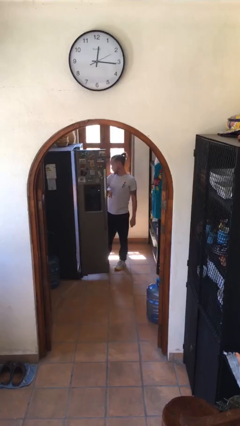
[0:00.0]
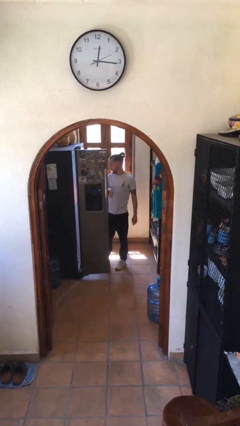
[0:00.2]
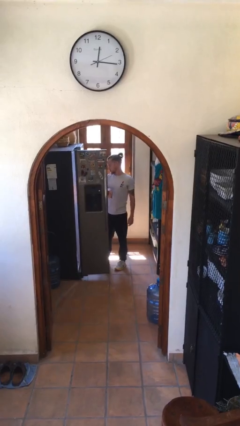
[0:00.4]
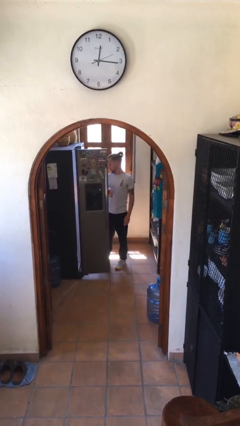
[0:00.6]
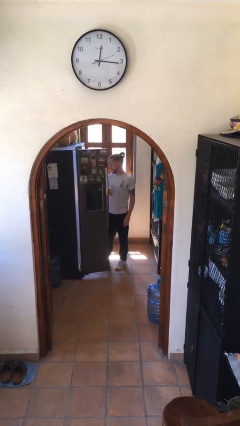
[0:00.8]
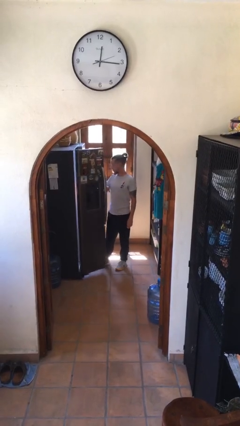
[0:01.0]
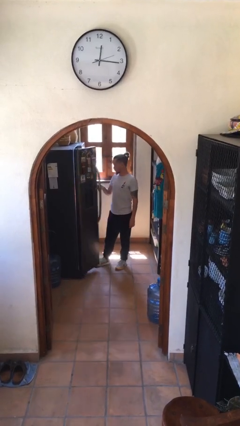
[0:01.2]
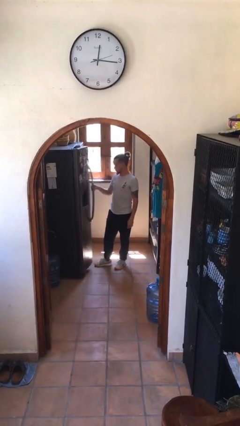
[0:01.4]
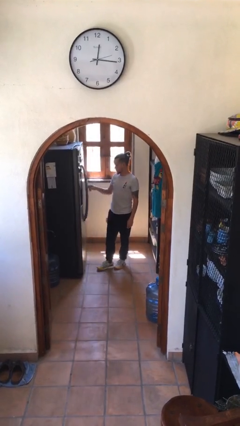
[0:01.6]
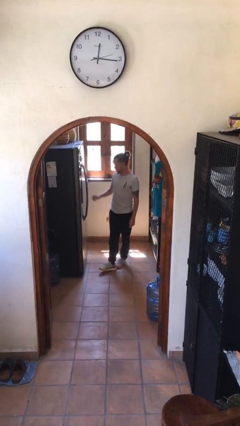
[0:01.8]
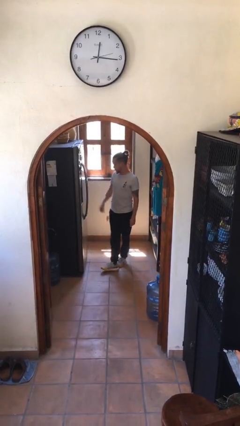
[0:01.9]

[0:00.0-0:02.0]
person closes refrigerator

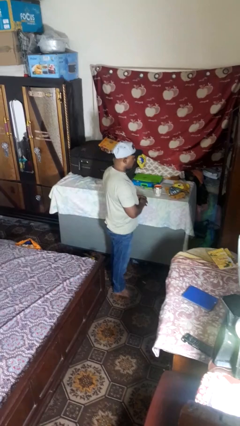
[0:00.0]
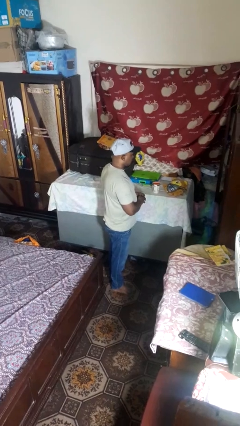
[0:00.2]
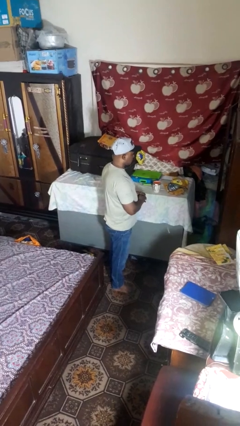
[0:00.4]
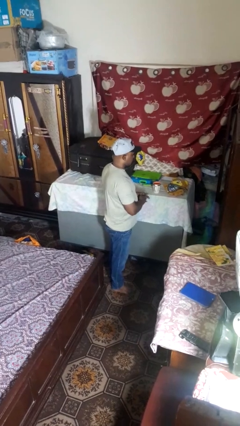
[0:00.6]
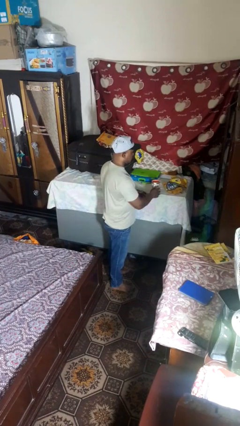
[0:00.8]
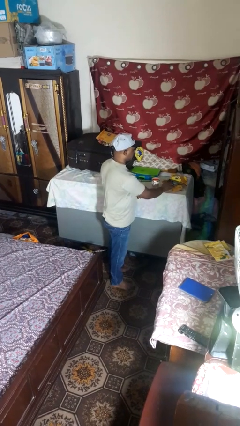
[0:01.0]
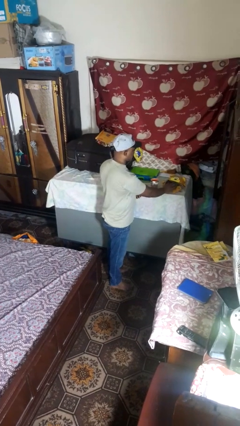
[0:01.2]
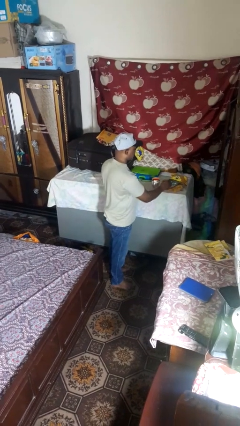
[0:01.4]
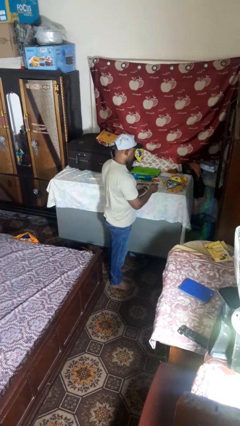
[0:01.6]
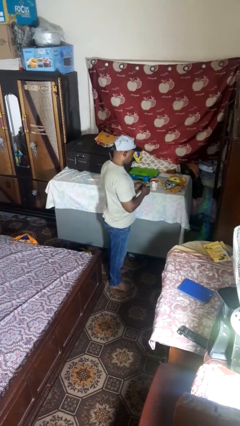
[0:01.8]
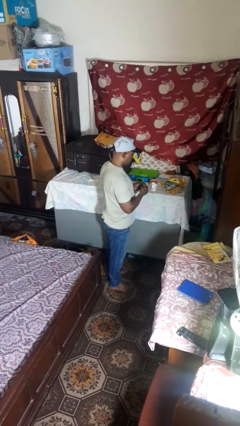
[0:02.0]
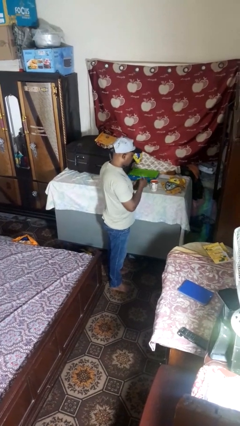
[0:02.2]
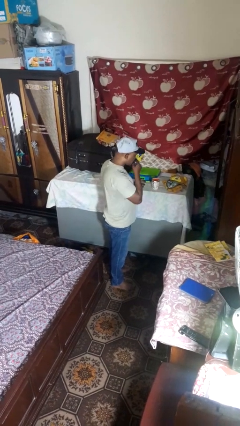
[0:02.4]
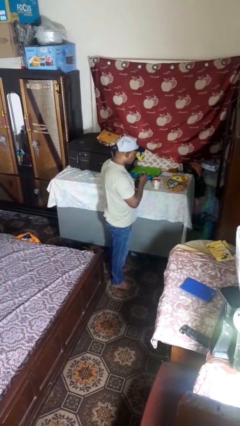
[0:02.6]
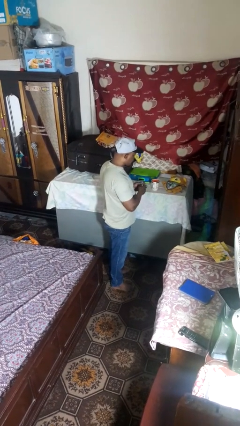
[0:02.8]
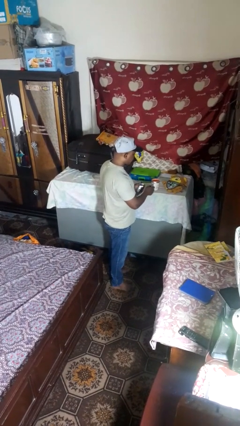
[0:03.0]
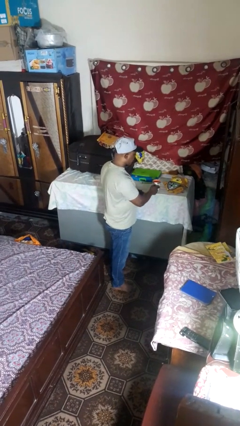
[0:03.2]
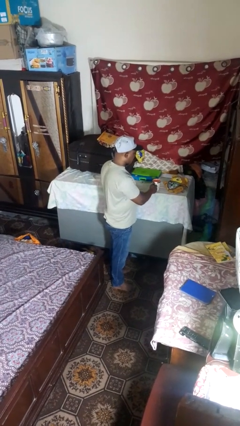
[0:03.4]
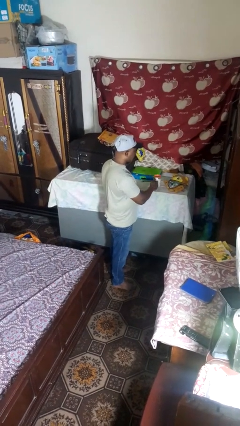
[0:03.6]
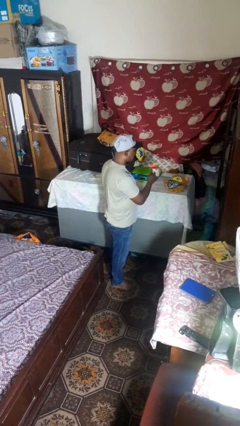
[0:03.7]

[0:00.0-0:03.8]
person takes medicine pills

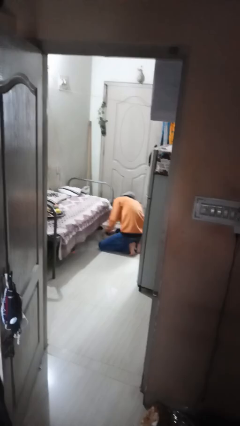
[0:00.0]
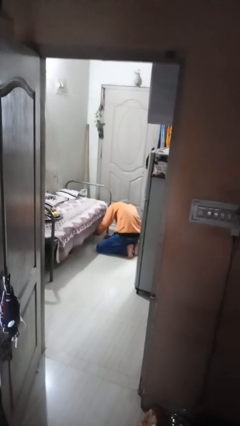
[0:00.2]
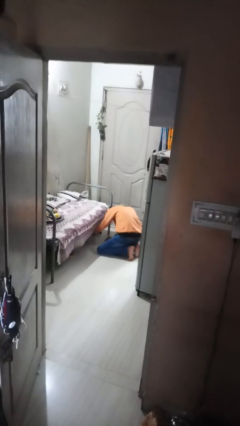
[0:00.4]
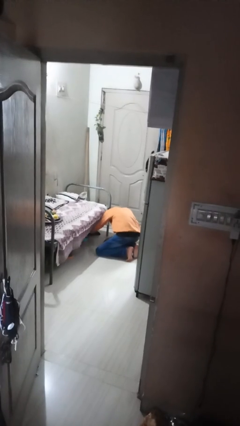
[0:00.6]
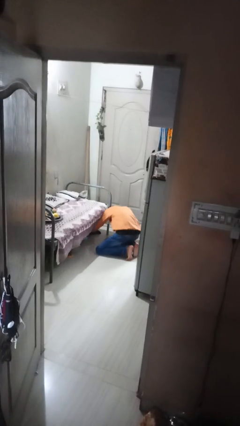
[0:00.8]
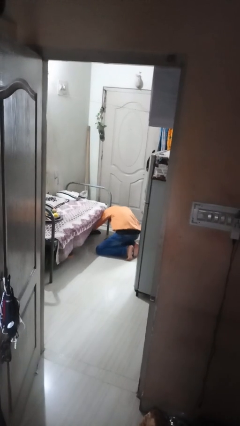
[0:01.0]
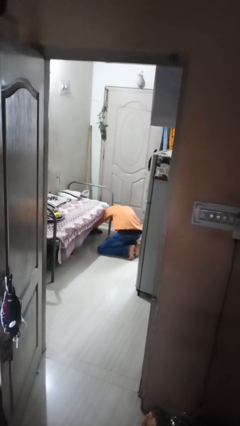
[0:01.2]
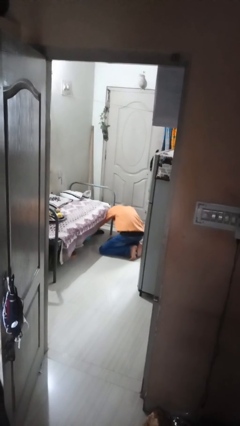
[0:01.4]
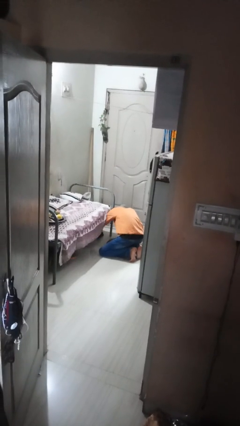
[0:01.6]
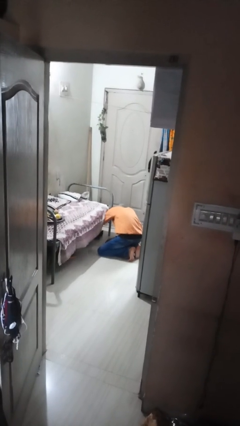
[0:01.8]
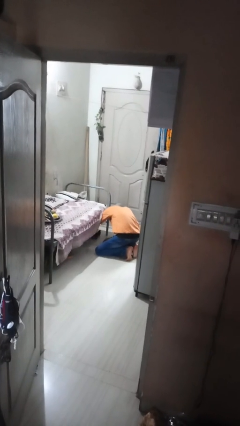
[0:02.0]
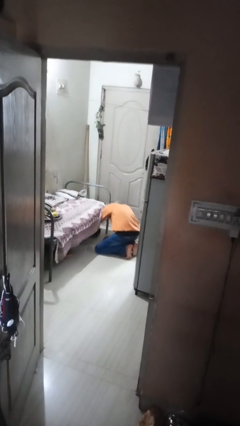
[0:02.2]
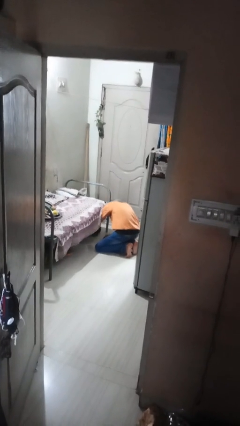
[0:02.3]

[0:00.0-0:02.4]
person searches under bed

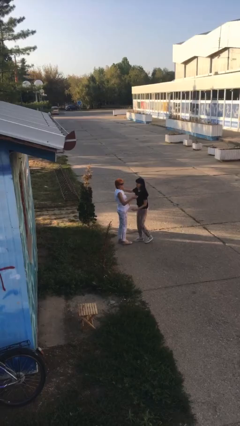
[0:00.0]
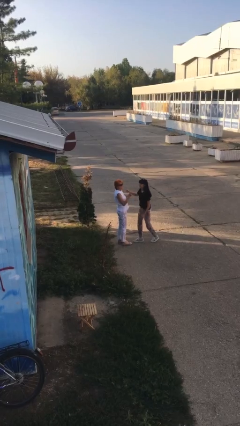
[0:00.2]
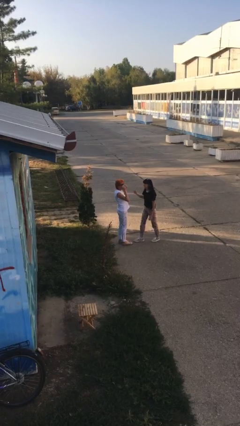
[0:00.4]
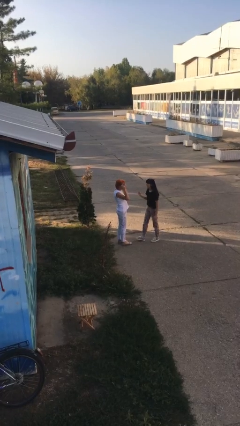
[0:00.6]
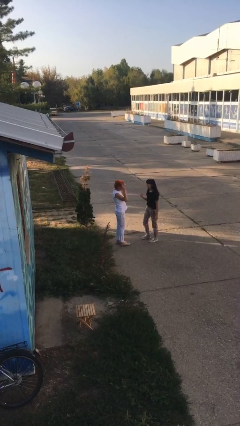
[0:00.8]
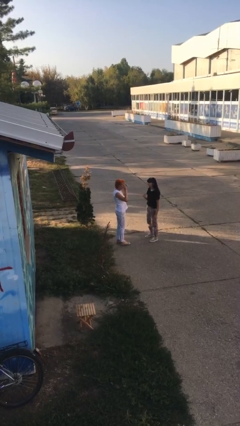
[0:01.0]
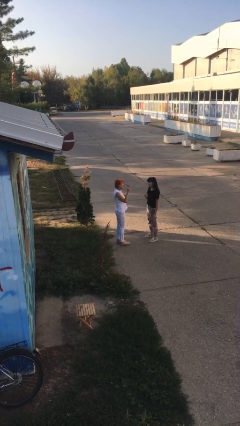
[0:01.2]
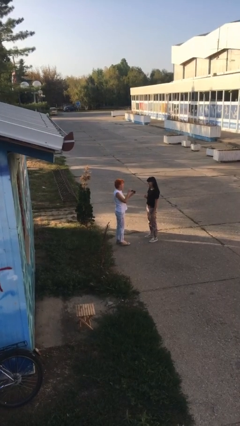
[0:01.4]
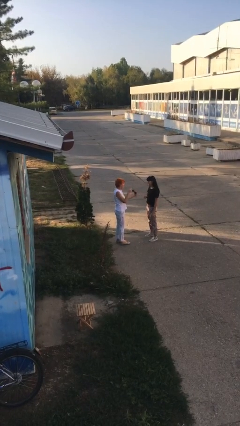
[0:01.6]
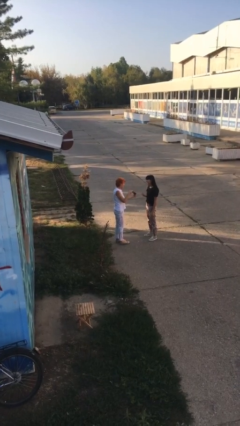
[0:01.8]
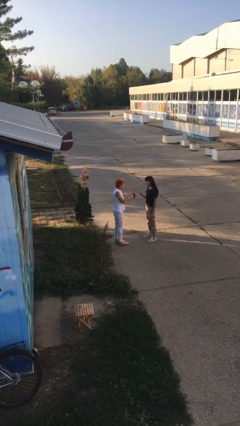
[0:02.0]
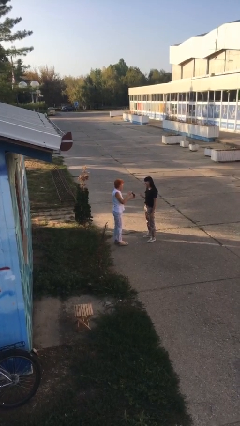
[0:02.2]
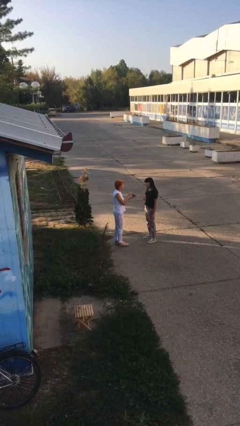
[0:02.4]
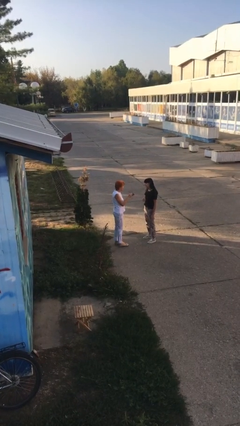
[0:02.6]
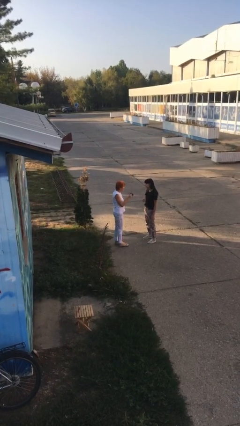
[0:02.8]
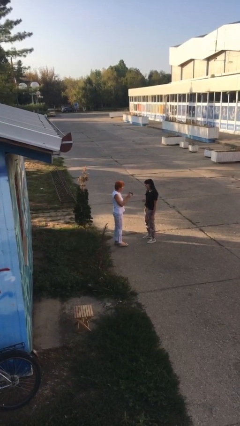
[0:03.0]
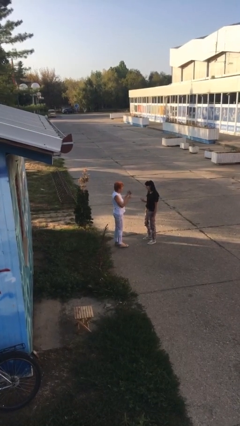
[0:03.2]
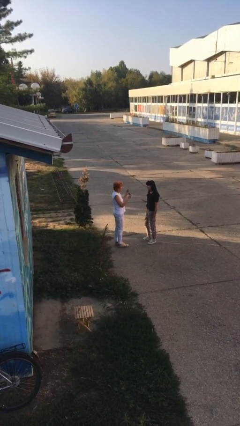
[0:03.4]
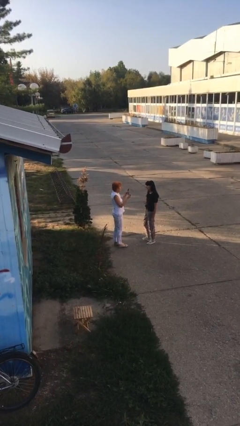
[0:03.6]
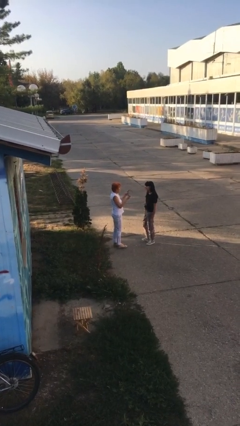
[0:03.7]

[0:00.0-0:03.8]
person talks to person

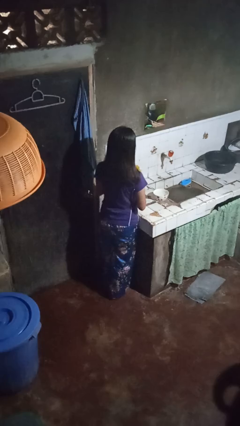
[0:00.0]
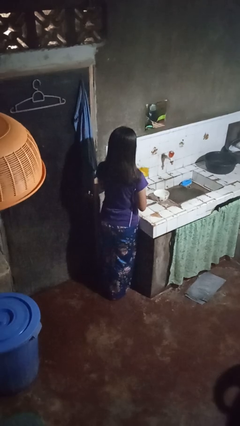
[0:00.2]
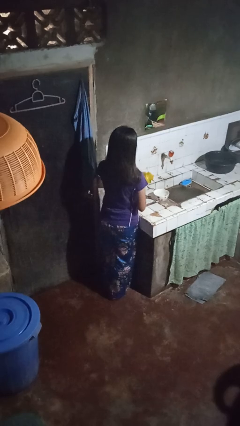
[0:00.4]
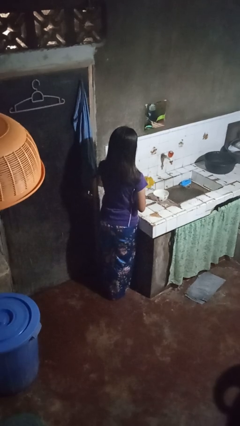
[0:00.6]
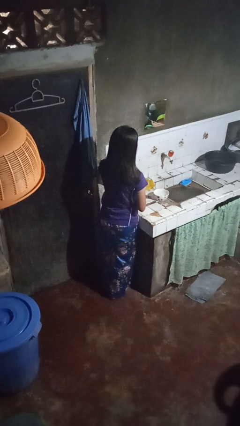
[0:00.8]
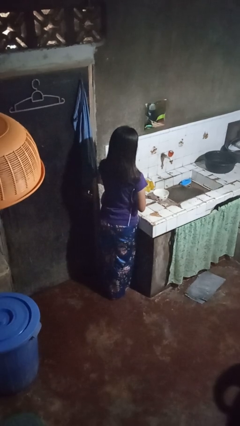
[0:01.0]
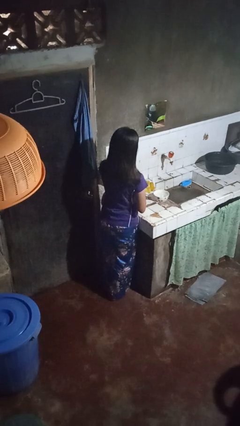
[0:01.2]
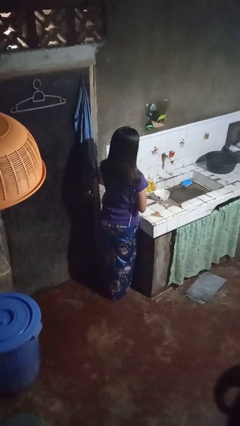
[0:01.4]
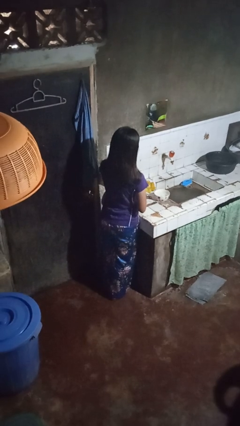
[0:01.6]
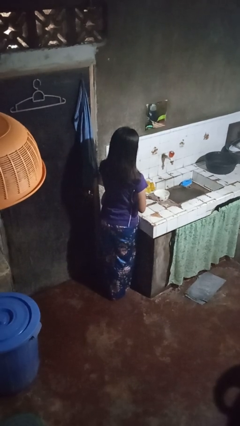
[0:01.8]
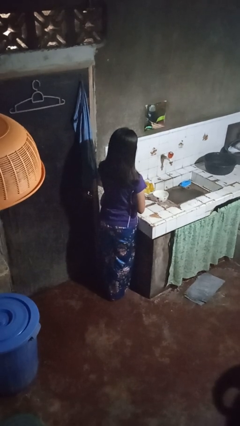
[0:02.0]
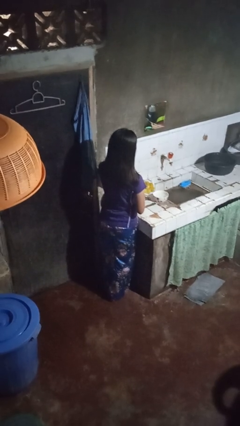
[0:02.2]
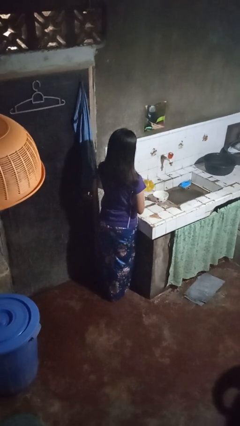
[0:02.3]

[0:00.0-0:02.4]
person pours into bowl

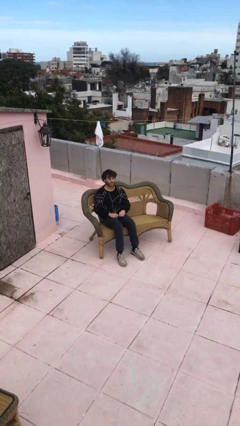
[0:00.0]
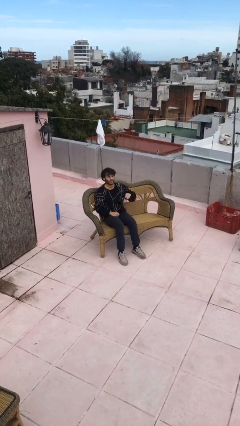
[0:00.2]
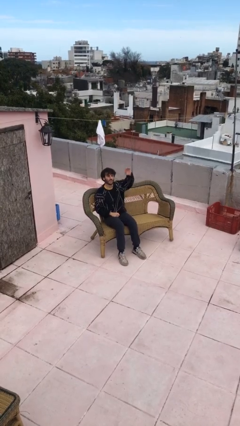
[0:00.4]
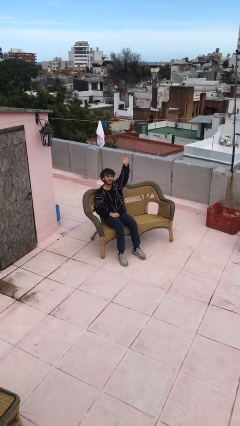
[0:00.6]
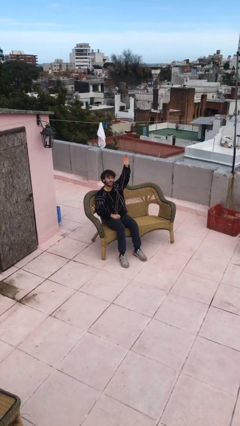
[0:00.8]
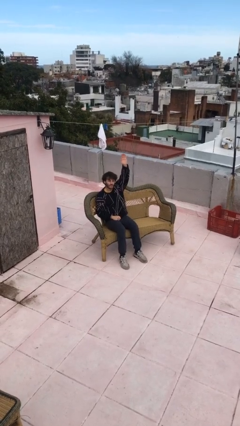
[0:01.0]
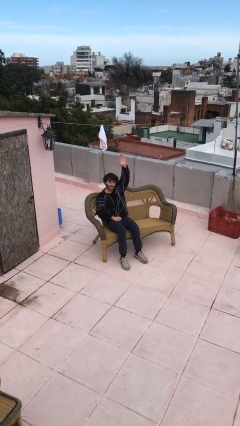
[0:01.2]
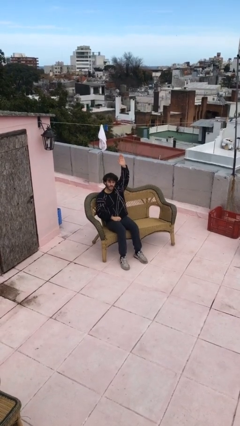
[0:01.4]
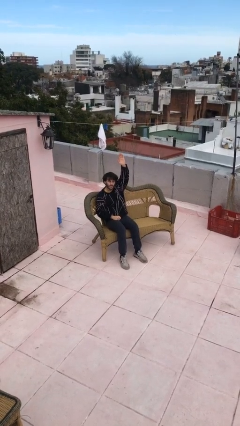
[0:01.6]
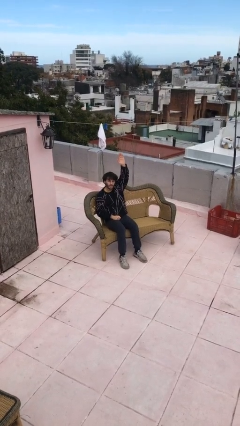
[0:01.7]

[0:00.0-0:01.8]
person gestures raise hand

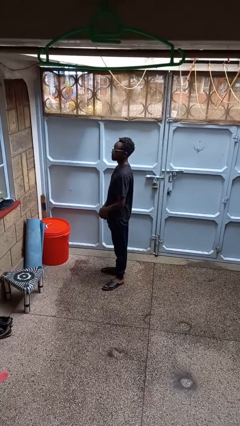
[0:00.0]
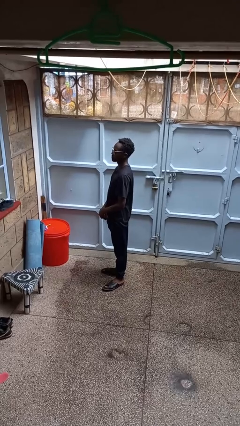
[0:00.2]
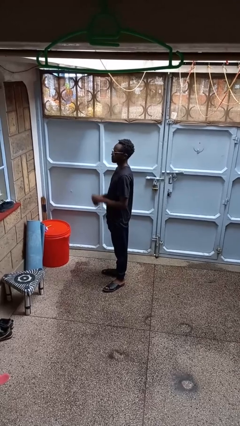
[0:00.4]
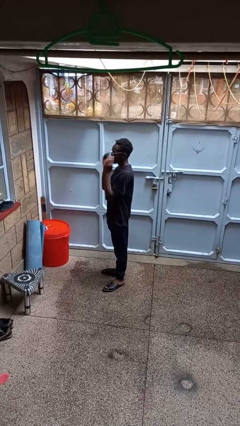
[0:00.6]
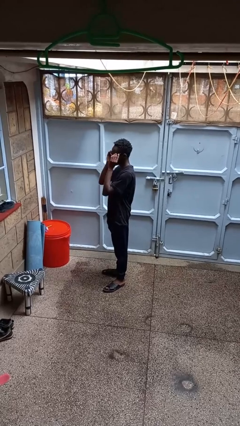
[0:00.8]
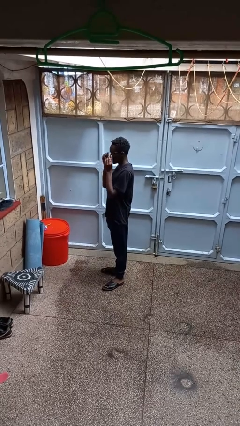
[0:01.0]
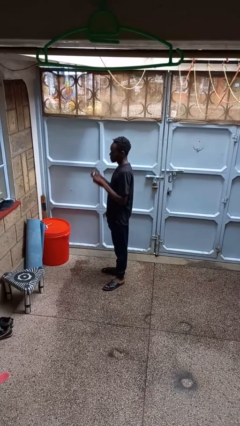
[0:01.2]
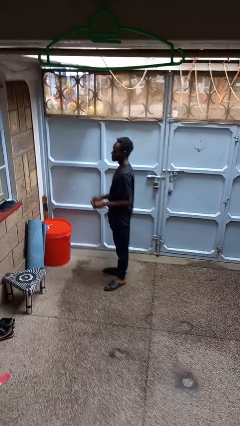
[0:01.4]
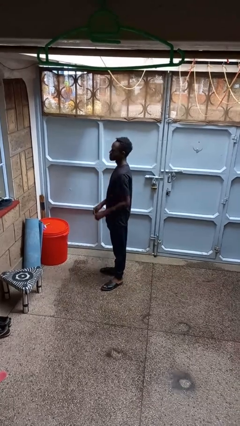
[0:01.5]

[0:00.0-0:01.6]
person takes off glasses
